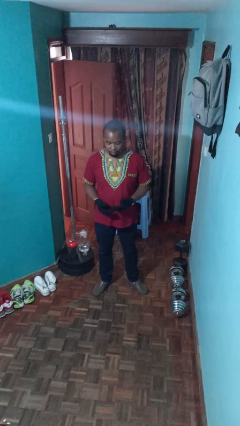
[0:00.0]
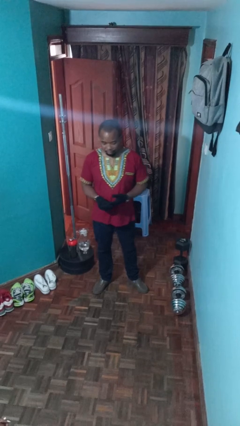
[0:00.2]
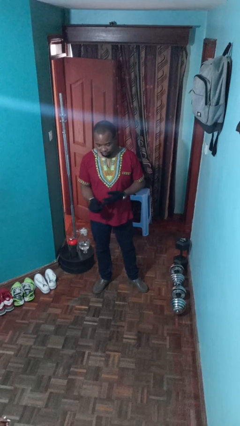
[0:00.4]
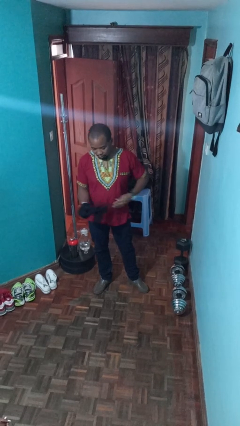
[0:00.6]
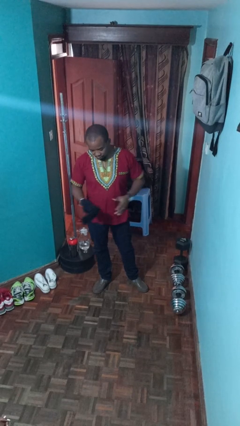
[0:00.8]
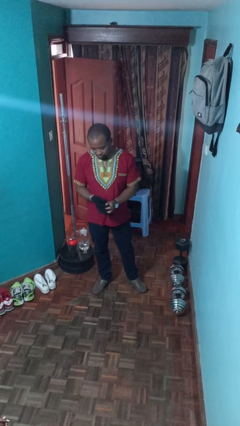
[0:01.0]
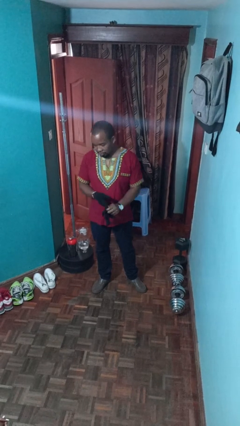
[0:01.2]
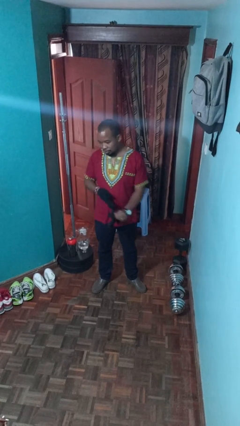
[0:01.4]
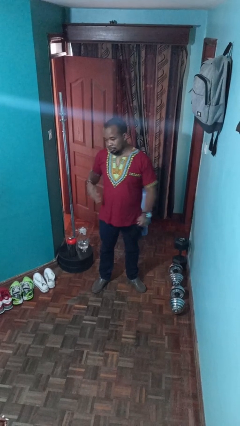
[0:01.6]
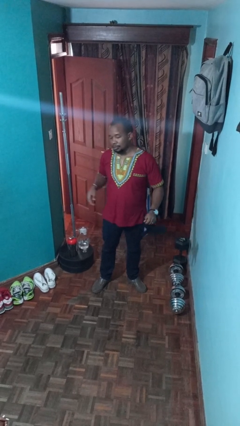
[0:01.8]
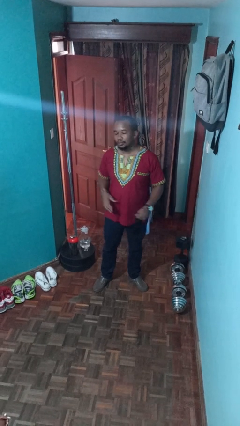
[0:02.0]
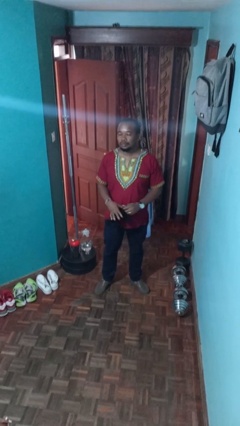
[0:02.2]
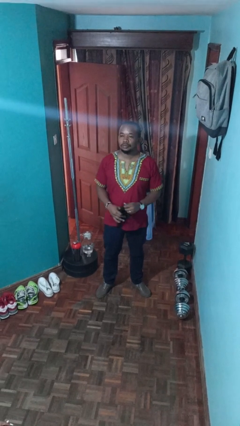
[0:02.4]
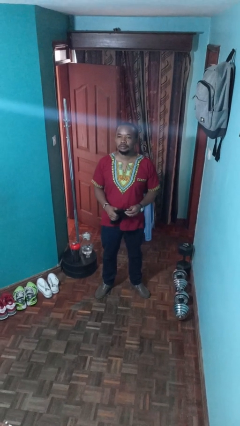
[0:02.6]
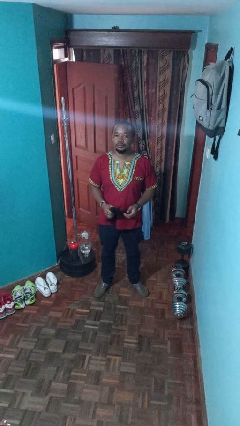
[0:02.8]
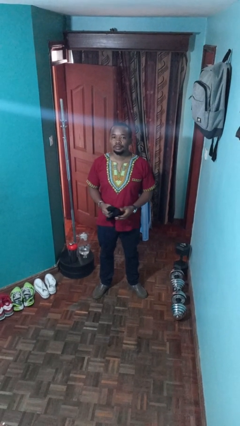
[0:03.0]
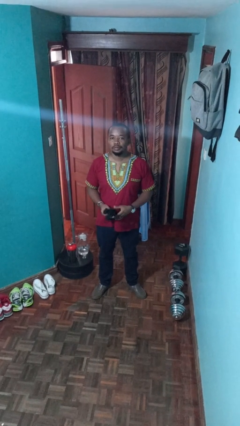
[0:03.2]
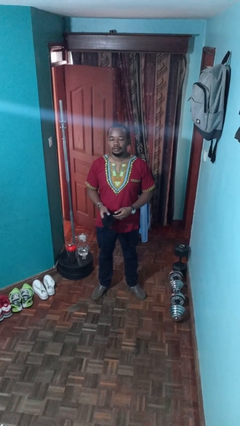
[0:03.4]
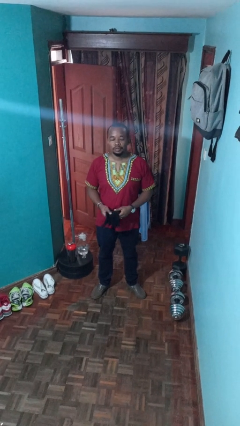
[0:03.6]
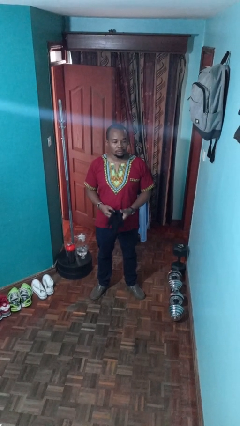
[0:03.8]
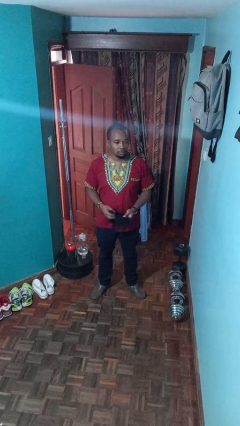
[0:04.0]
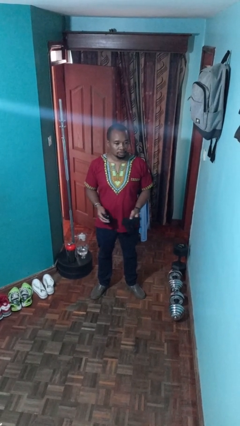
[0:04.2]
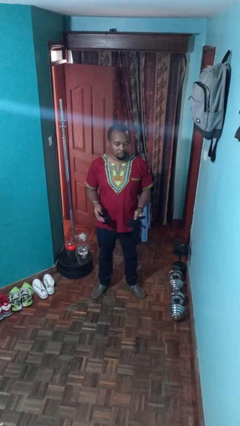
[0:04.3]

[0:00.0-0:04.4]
person takes off gloves

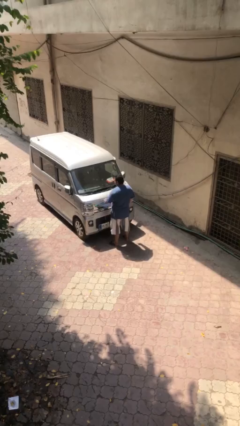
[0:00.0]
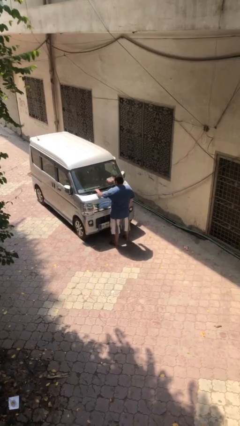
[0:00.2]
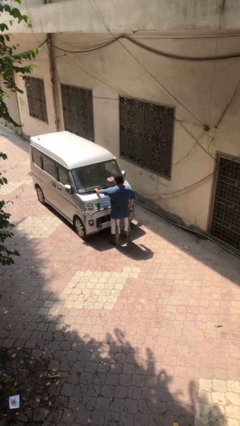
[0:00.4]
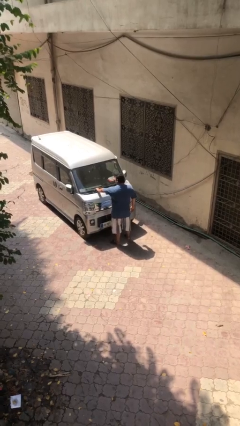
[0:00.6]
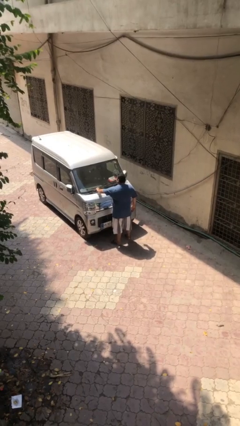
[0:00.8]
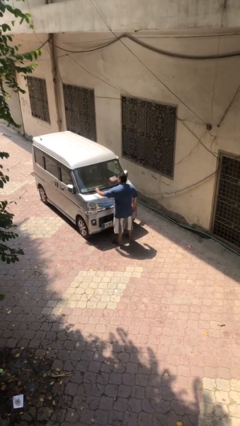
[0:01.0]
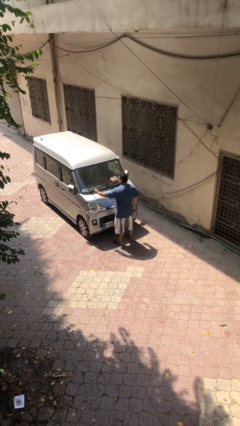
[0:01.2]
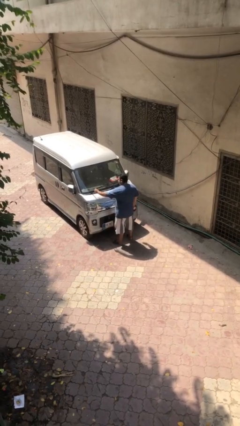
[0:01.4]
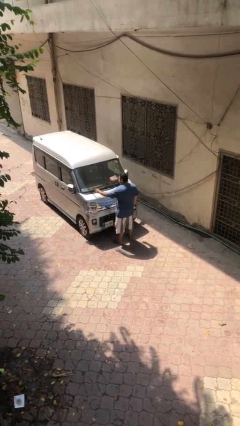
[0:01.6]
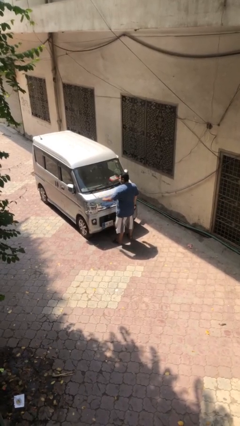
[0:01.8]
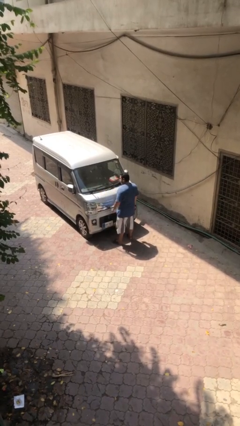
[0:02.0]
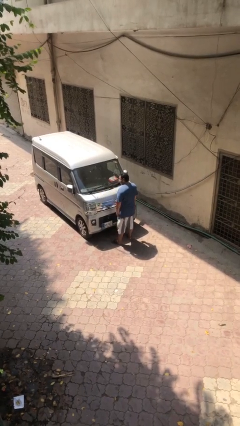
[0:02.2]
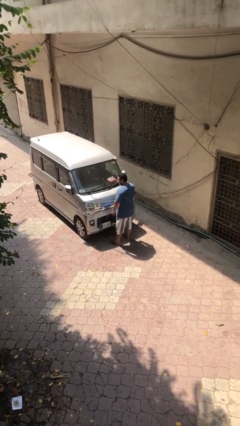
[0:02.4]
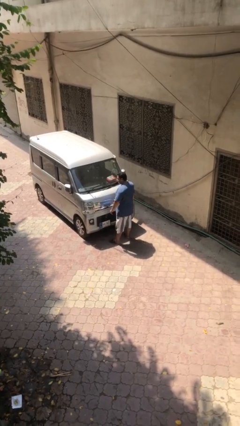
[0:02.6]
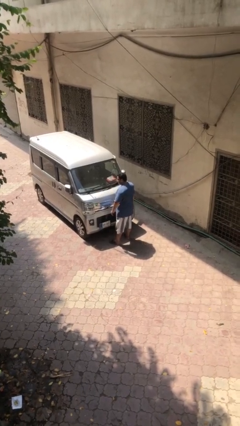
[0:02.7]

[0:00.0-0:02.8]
person flips up car wipers

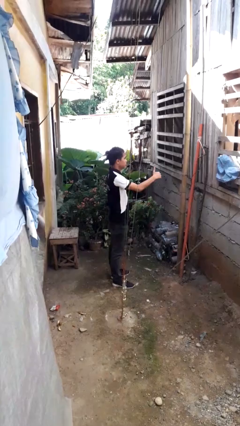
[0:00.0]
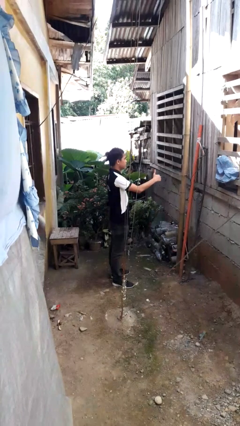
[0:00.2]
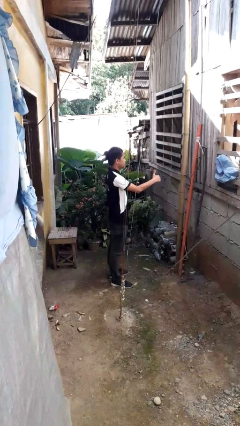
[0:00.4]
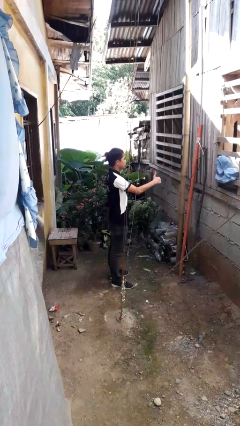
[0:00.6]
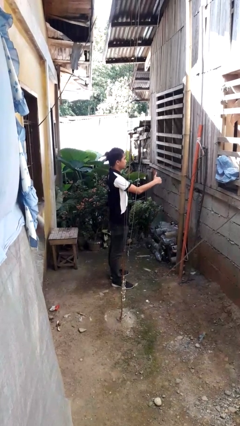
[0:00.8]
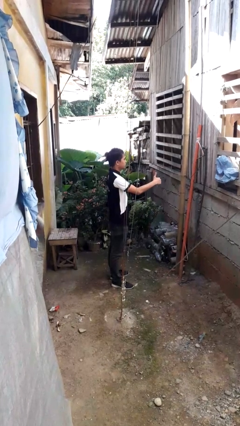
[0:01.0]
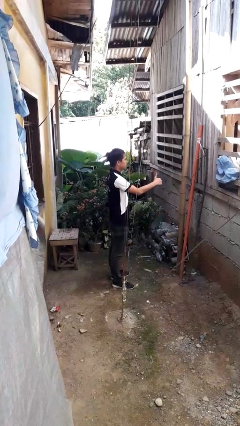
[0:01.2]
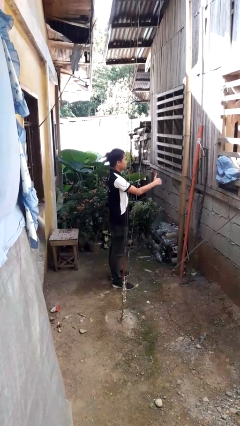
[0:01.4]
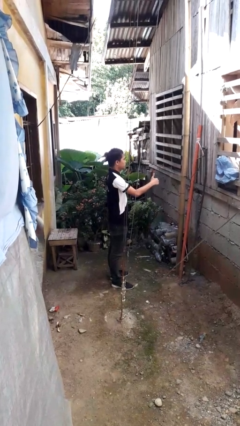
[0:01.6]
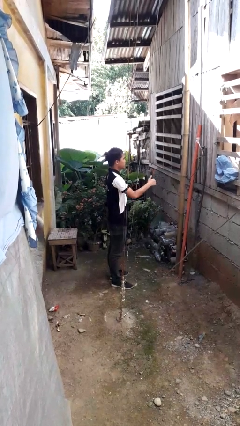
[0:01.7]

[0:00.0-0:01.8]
person gestures thumbs up

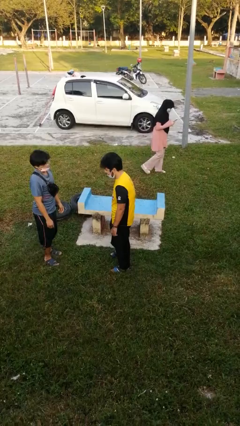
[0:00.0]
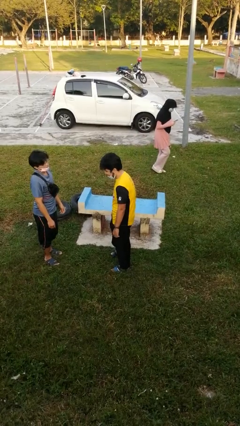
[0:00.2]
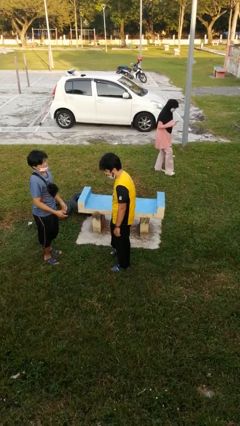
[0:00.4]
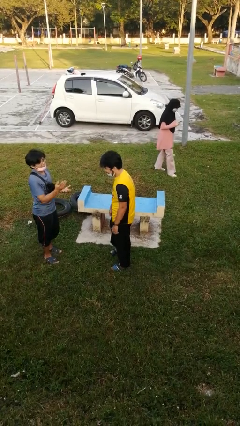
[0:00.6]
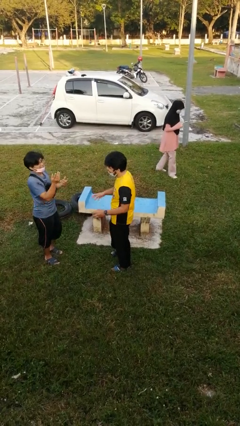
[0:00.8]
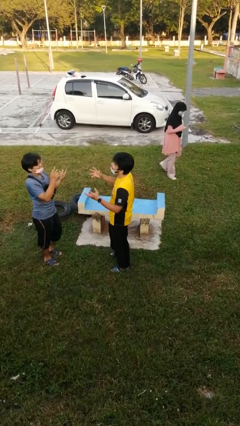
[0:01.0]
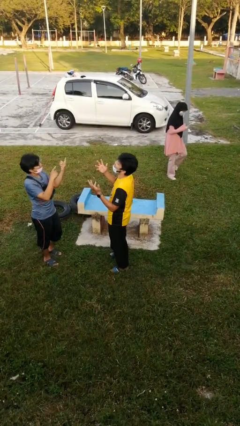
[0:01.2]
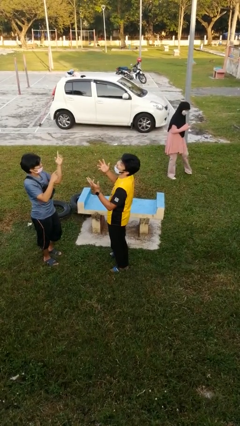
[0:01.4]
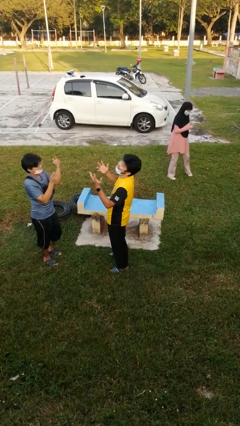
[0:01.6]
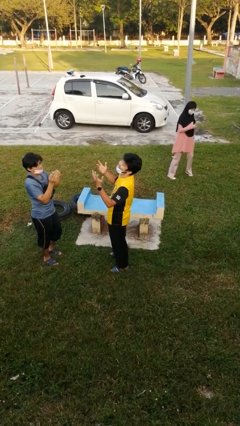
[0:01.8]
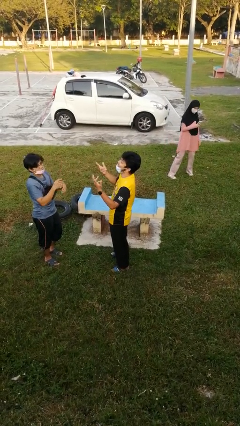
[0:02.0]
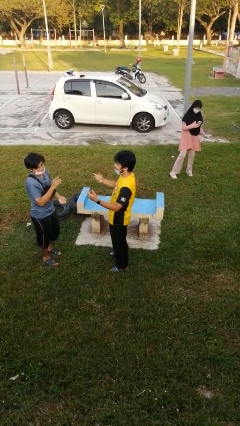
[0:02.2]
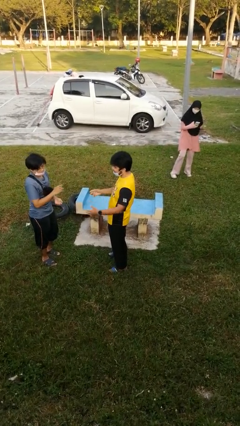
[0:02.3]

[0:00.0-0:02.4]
person talks to person

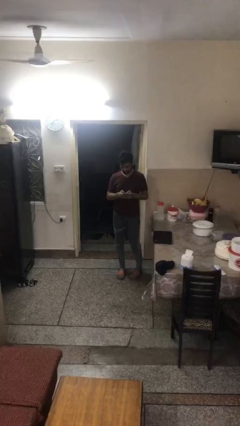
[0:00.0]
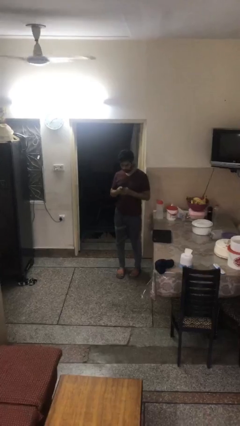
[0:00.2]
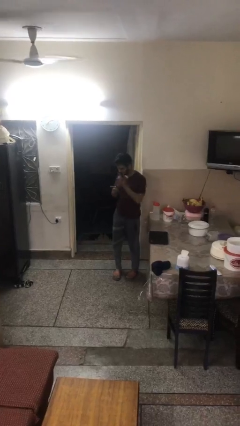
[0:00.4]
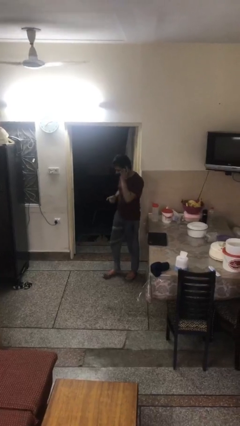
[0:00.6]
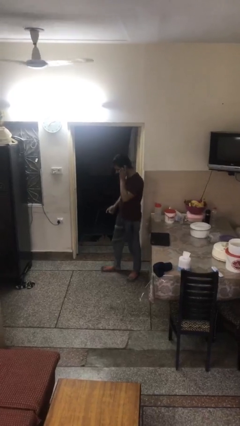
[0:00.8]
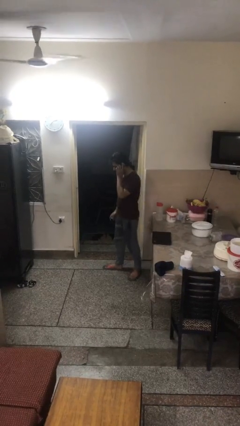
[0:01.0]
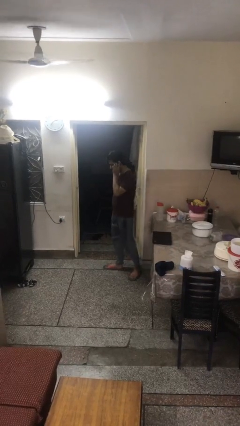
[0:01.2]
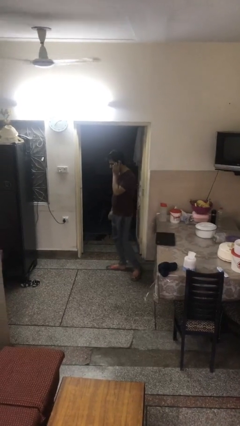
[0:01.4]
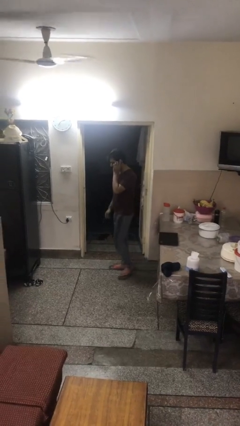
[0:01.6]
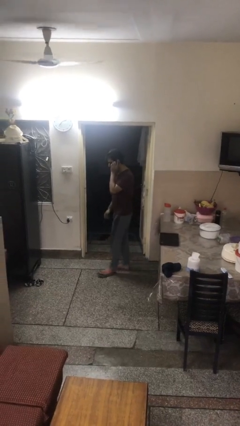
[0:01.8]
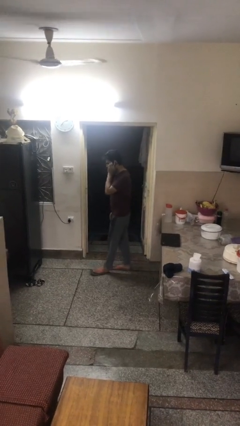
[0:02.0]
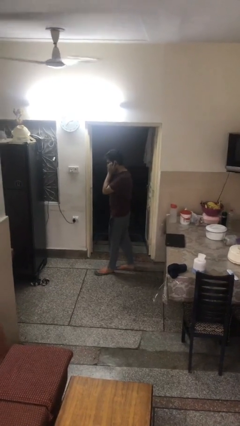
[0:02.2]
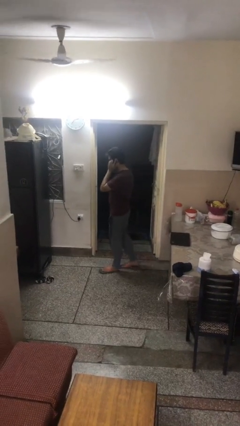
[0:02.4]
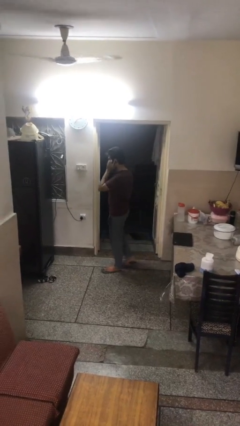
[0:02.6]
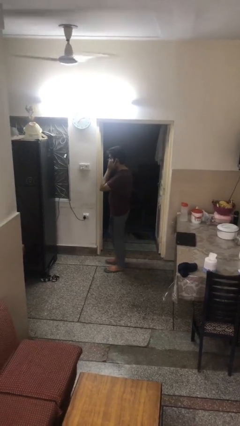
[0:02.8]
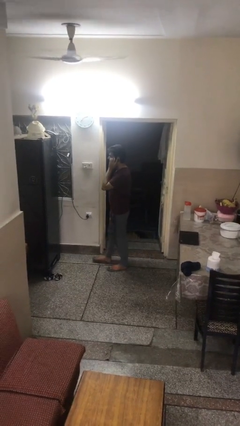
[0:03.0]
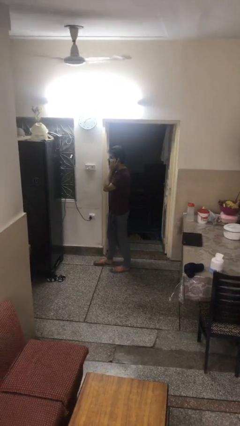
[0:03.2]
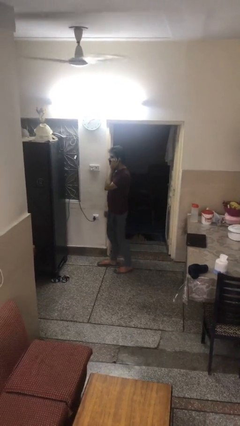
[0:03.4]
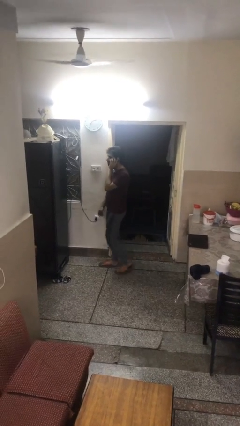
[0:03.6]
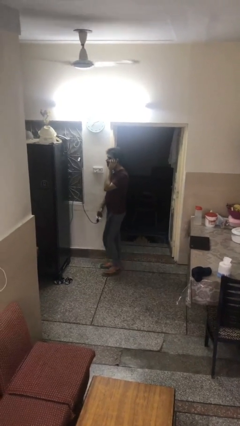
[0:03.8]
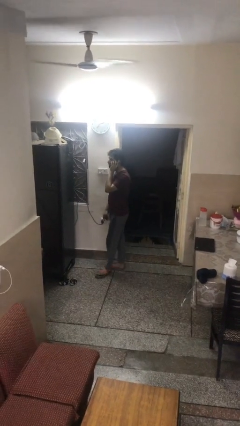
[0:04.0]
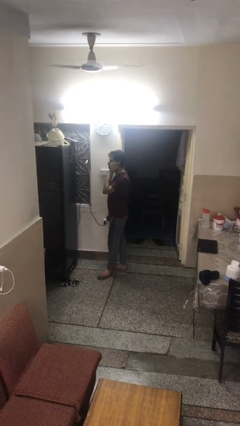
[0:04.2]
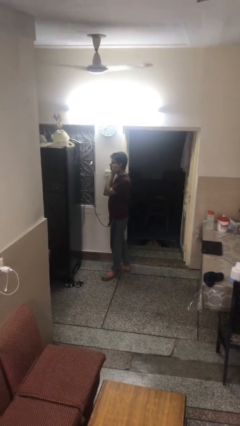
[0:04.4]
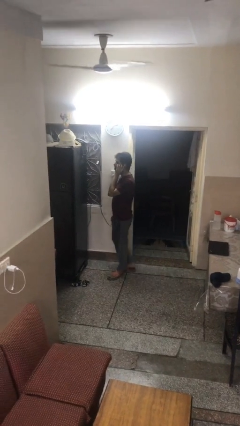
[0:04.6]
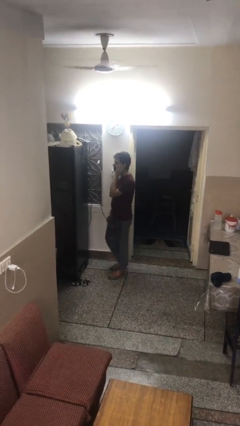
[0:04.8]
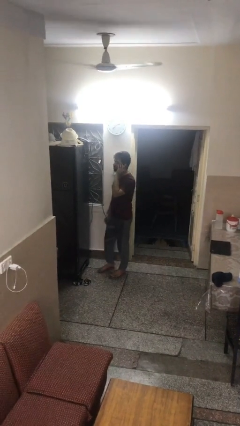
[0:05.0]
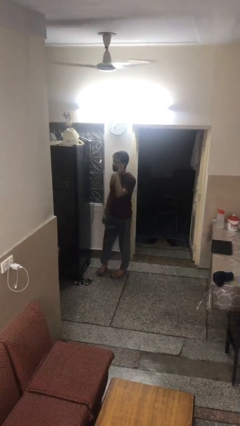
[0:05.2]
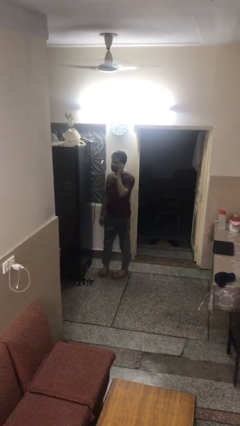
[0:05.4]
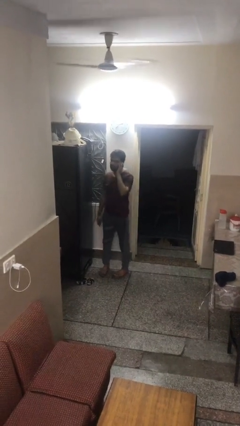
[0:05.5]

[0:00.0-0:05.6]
person talks on phone

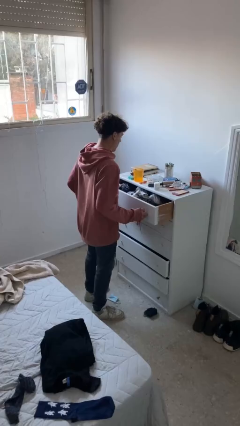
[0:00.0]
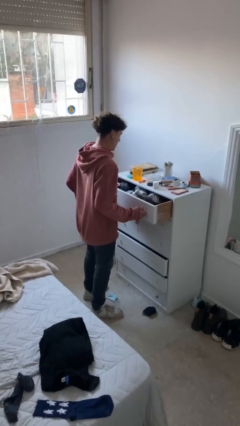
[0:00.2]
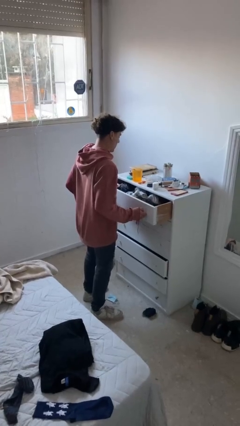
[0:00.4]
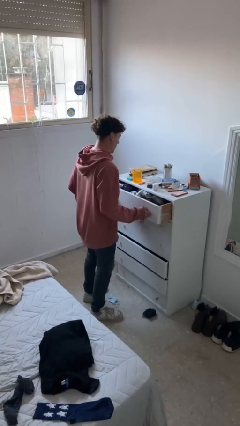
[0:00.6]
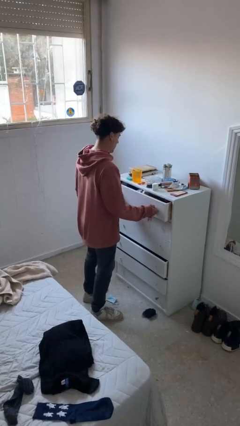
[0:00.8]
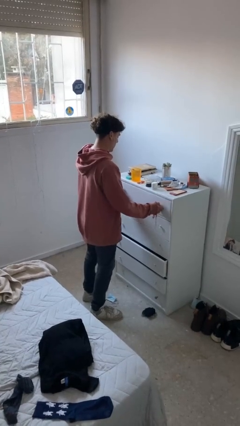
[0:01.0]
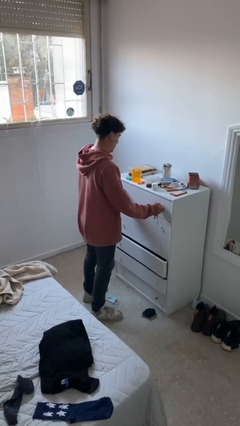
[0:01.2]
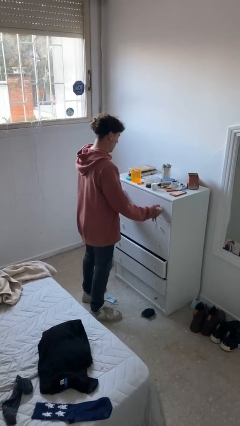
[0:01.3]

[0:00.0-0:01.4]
person closes dresser drawer
